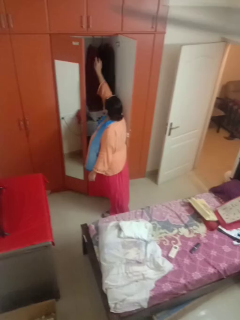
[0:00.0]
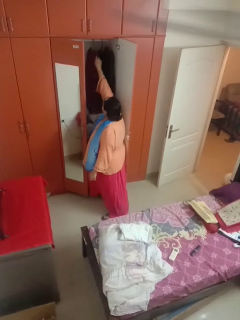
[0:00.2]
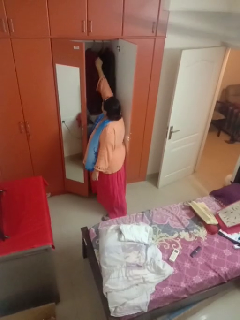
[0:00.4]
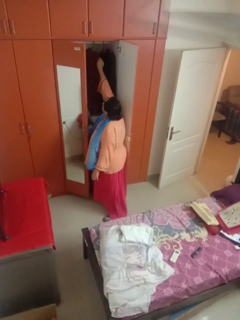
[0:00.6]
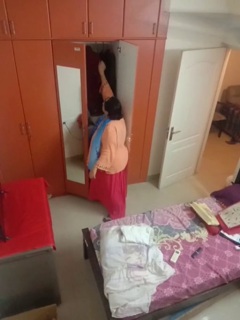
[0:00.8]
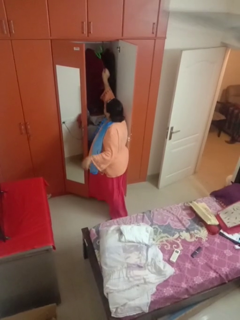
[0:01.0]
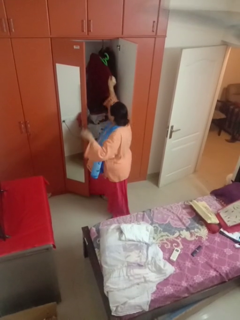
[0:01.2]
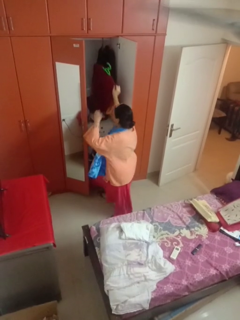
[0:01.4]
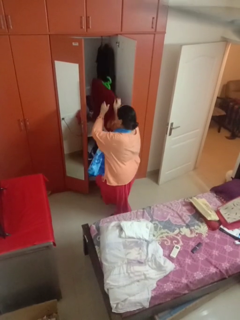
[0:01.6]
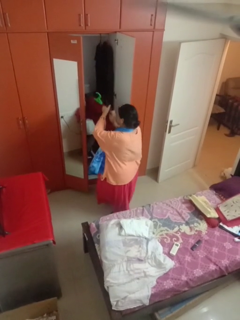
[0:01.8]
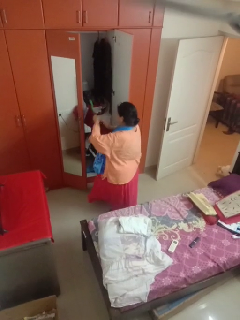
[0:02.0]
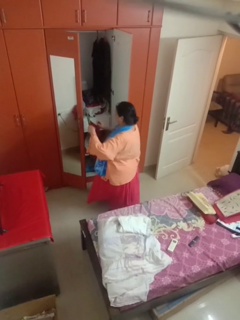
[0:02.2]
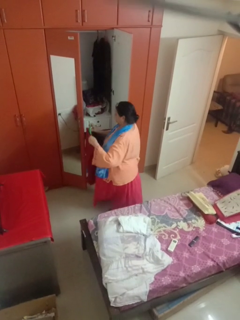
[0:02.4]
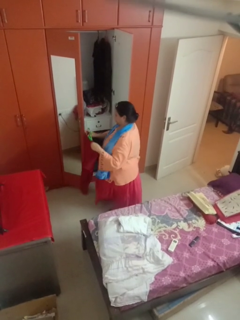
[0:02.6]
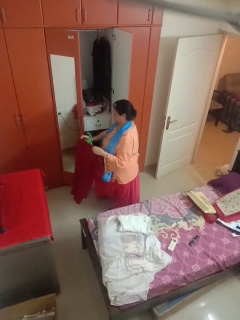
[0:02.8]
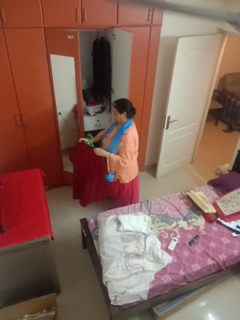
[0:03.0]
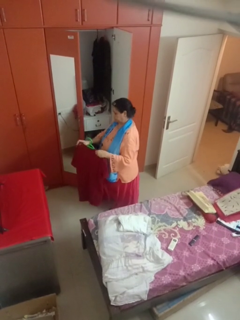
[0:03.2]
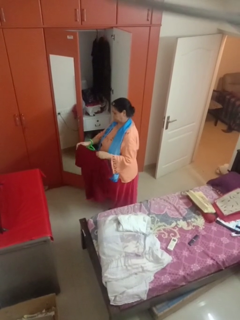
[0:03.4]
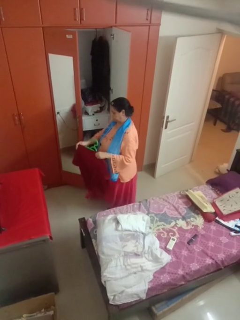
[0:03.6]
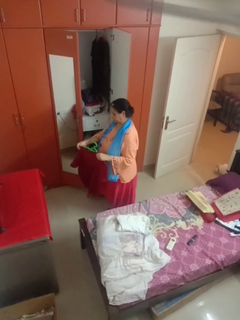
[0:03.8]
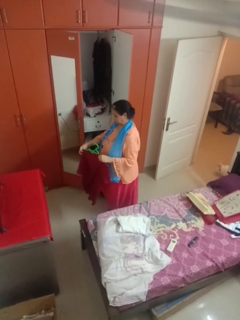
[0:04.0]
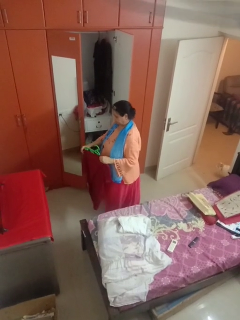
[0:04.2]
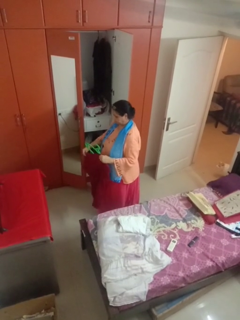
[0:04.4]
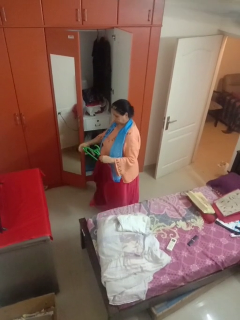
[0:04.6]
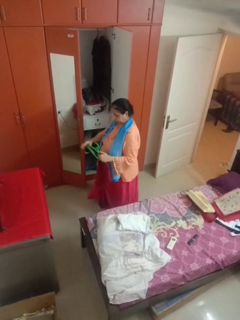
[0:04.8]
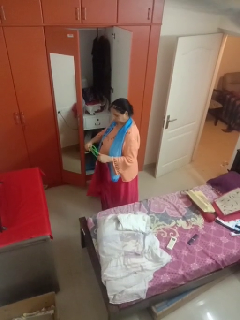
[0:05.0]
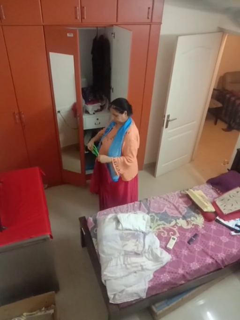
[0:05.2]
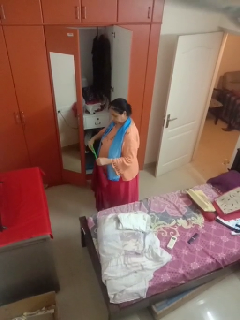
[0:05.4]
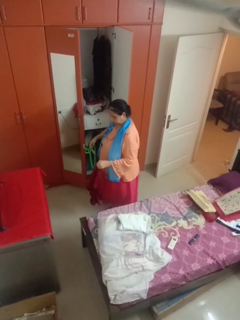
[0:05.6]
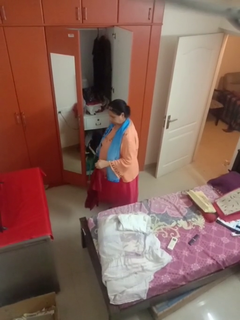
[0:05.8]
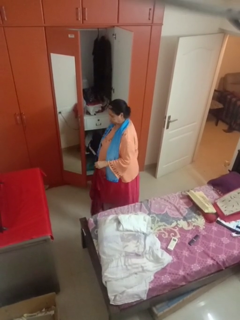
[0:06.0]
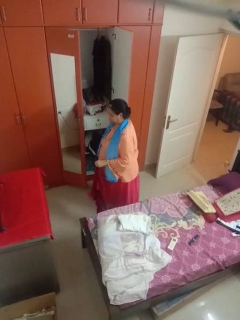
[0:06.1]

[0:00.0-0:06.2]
person takes clothes from closet

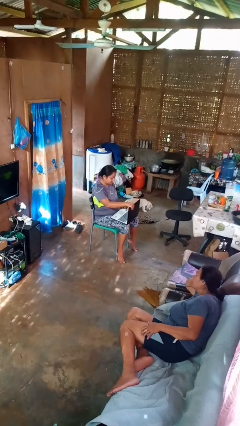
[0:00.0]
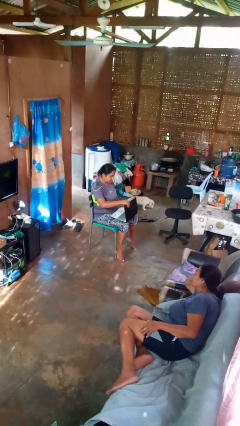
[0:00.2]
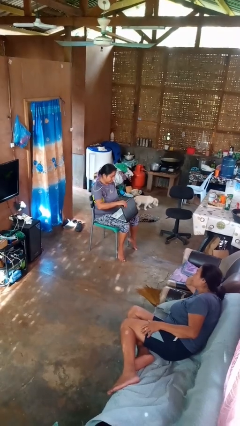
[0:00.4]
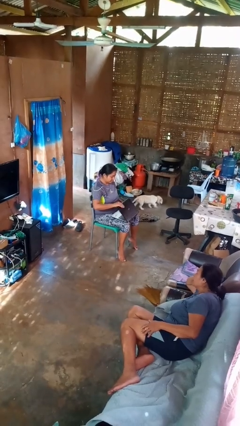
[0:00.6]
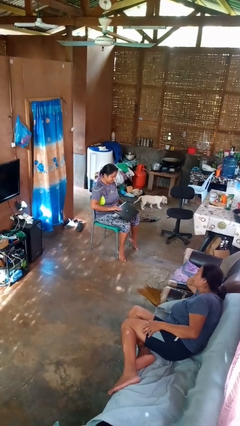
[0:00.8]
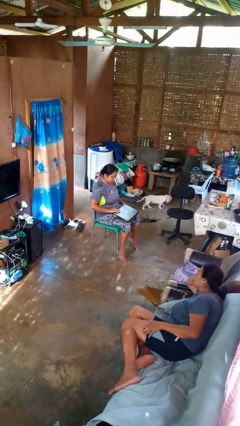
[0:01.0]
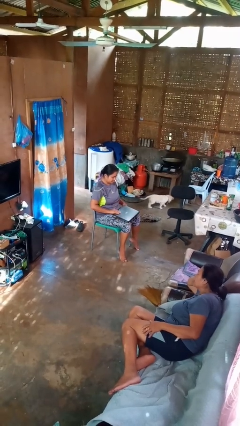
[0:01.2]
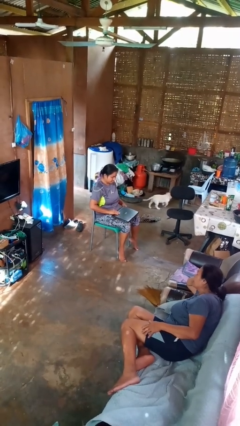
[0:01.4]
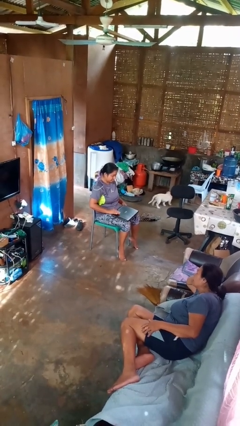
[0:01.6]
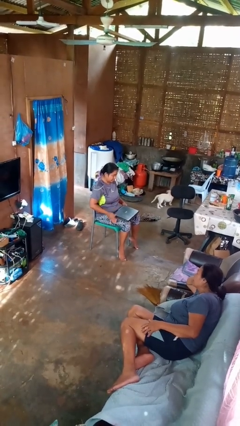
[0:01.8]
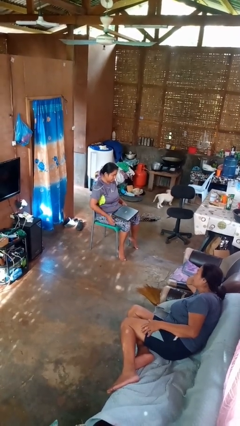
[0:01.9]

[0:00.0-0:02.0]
person closes laptop

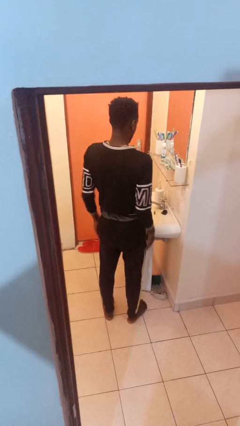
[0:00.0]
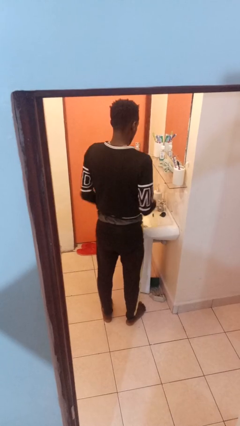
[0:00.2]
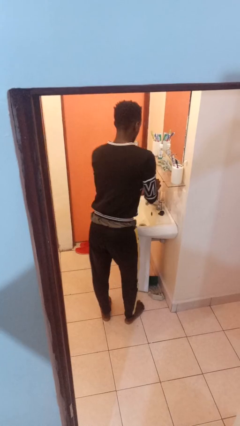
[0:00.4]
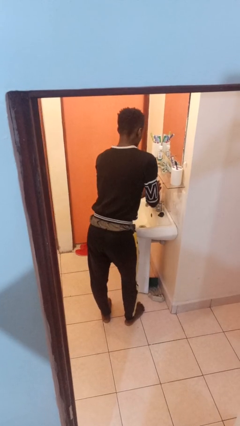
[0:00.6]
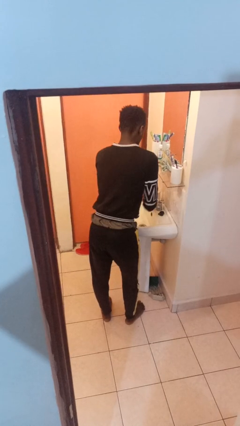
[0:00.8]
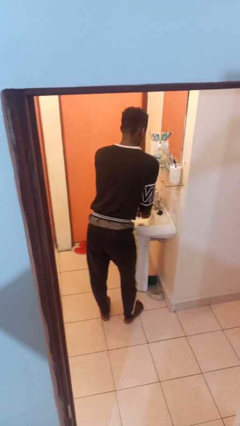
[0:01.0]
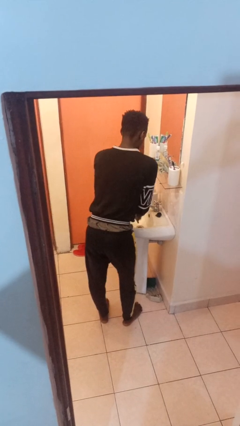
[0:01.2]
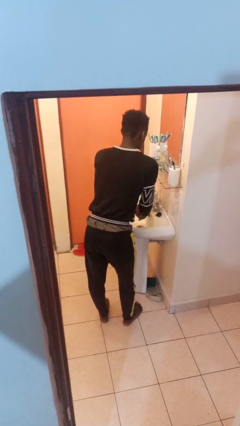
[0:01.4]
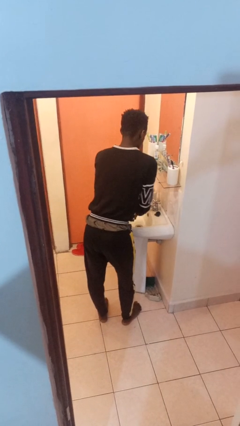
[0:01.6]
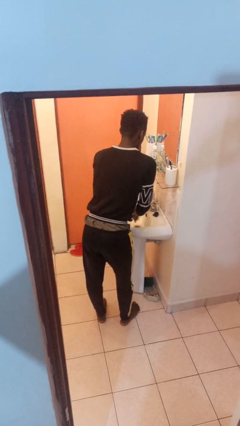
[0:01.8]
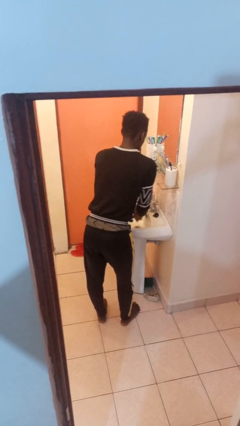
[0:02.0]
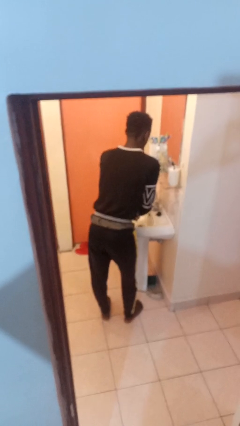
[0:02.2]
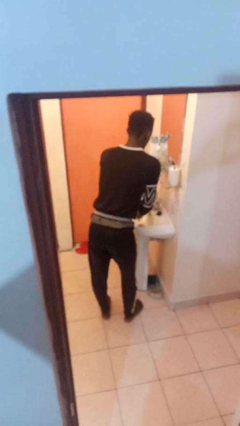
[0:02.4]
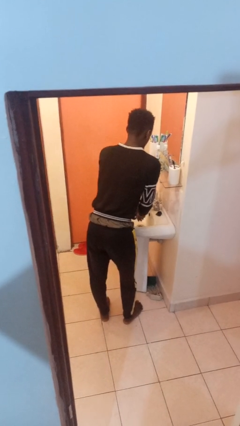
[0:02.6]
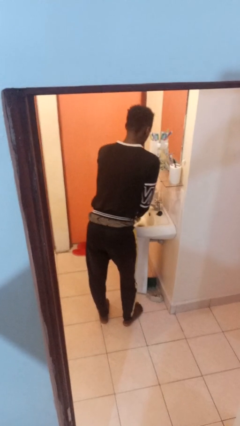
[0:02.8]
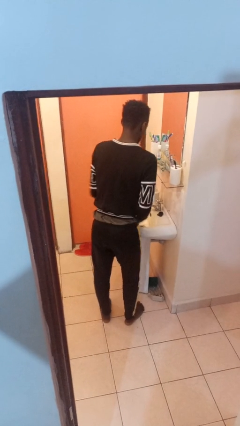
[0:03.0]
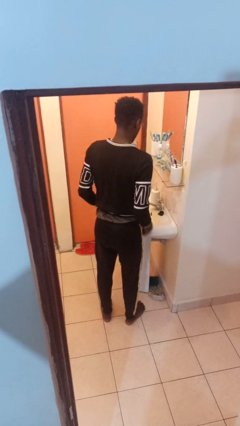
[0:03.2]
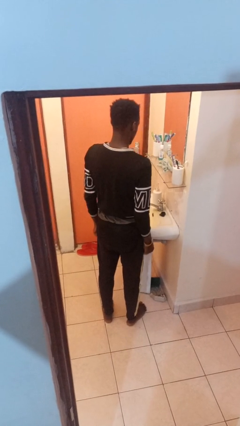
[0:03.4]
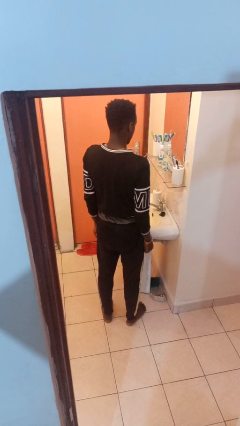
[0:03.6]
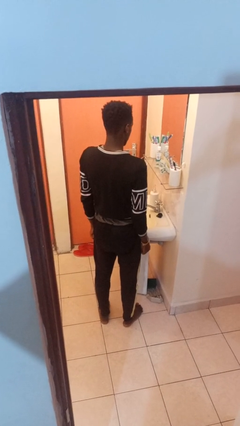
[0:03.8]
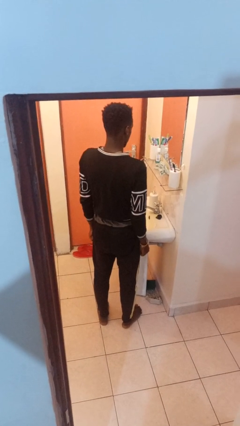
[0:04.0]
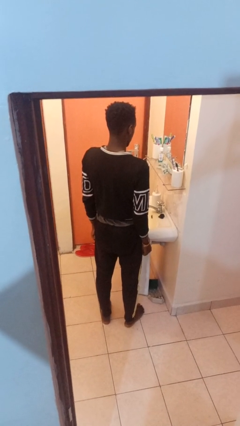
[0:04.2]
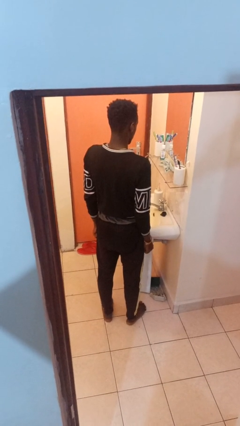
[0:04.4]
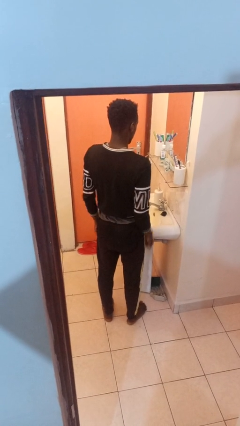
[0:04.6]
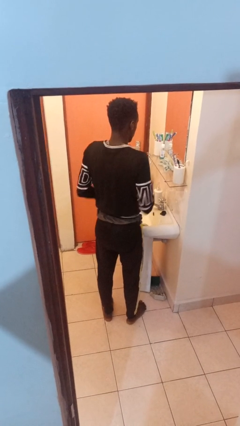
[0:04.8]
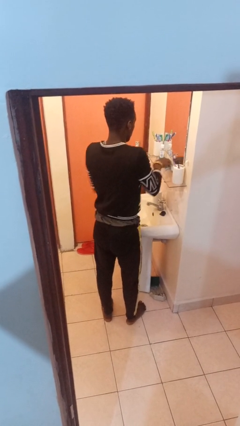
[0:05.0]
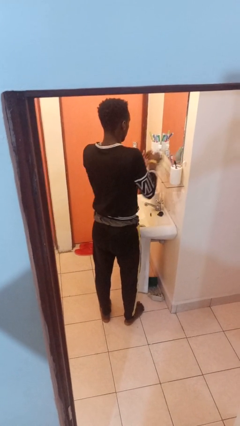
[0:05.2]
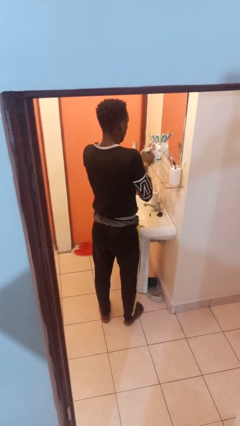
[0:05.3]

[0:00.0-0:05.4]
person washes hands

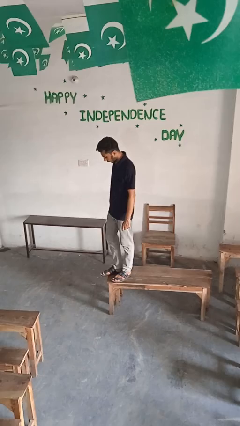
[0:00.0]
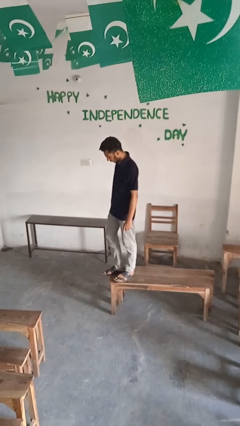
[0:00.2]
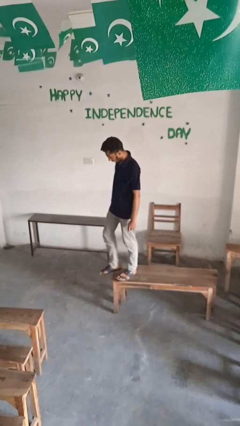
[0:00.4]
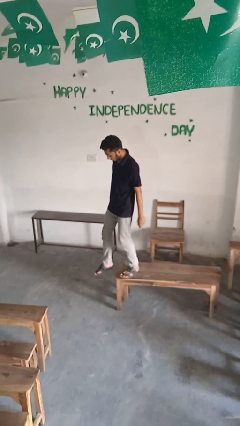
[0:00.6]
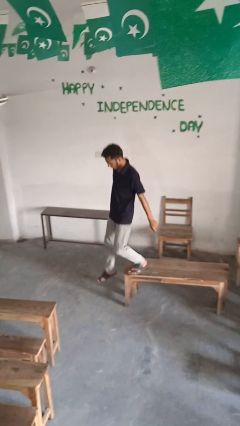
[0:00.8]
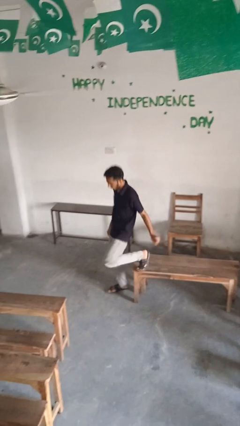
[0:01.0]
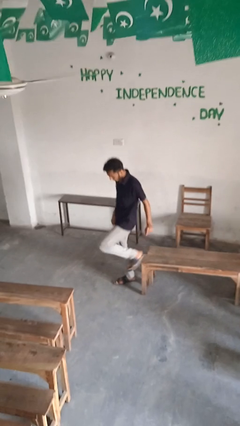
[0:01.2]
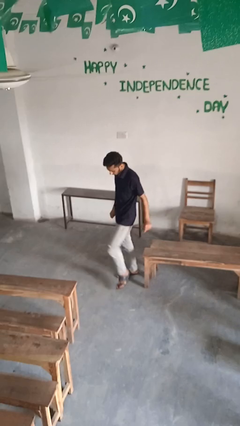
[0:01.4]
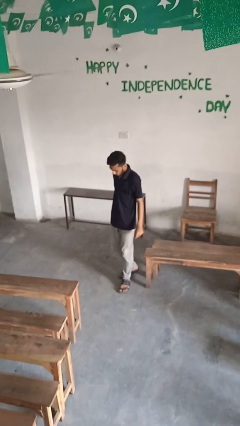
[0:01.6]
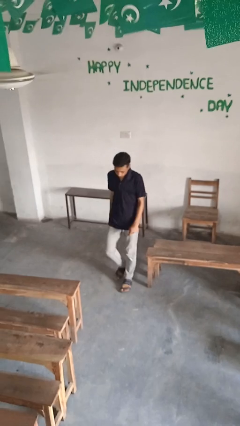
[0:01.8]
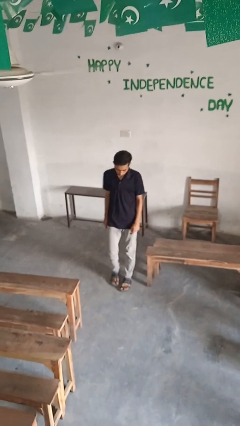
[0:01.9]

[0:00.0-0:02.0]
person climbs off table

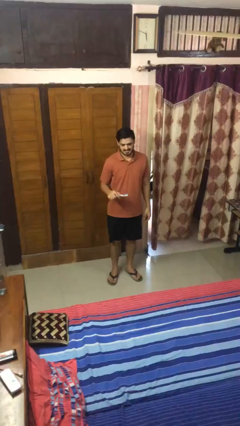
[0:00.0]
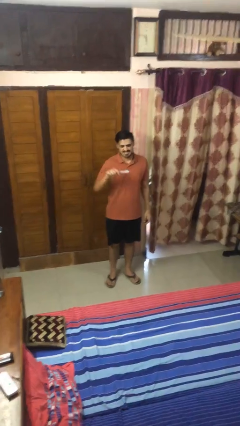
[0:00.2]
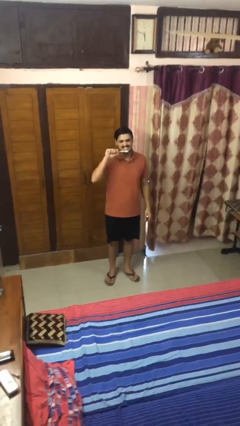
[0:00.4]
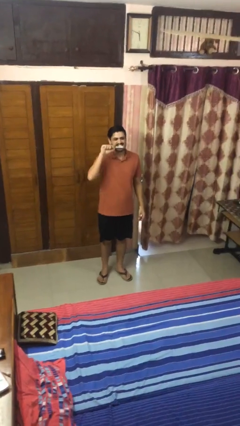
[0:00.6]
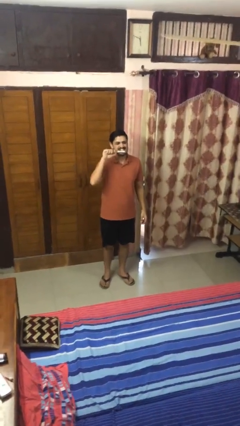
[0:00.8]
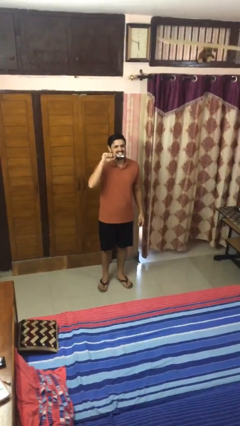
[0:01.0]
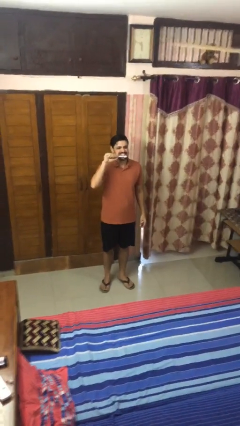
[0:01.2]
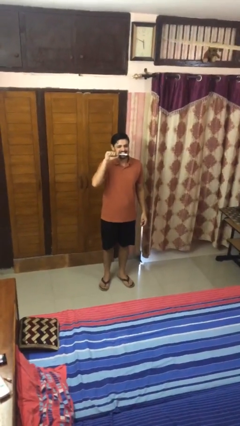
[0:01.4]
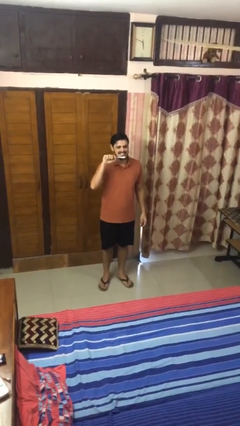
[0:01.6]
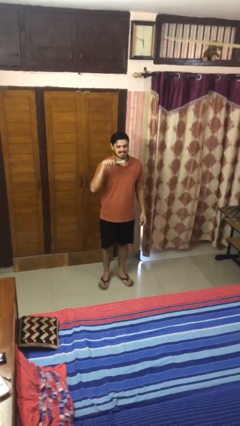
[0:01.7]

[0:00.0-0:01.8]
person brushes teeth

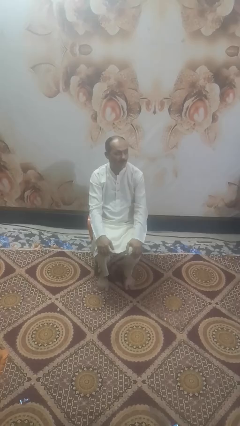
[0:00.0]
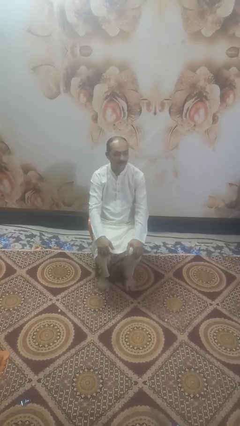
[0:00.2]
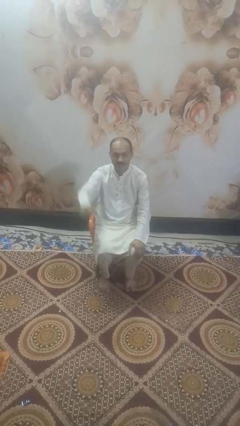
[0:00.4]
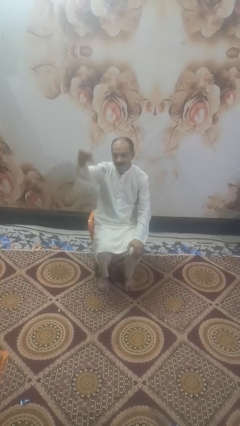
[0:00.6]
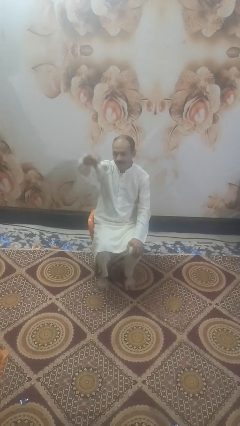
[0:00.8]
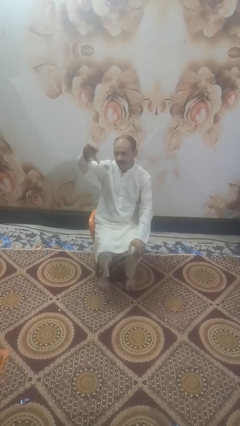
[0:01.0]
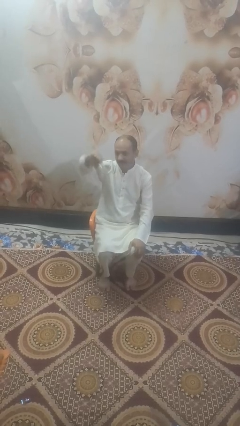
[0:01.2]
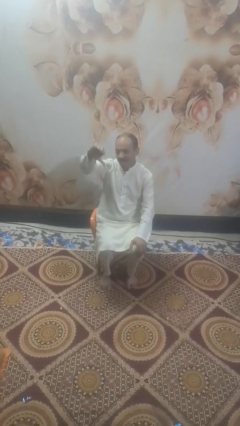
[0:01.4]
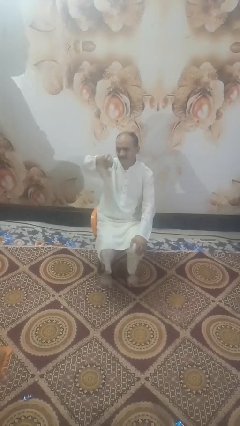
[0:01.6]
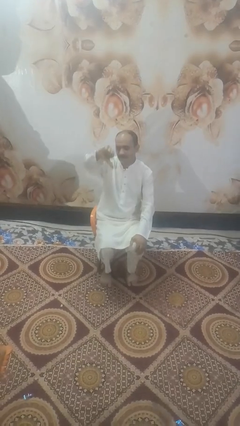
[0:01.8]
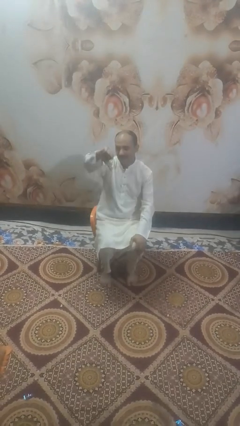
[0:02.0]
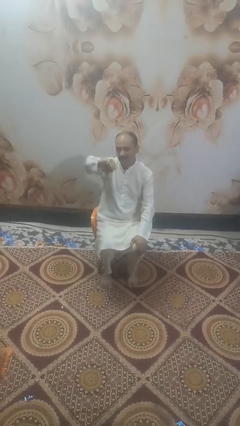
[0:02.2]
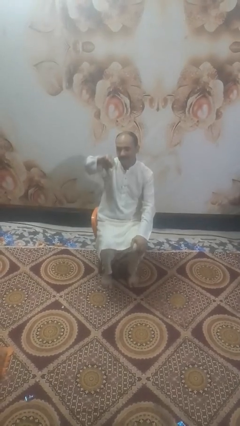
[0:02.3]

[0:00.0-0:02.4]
person gestures thumbs down
